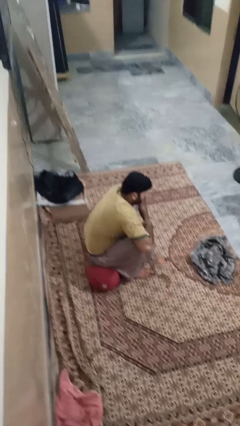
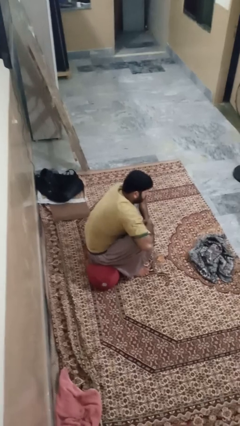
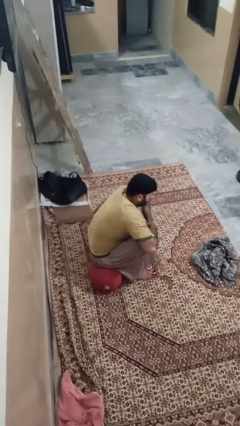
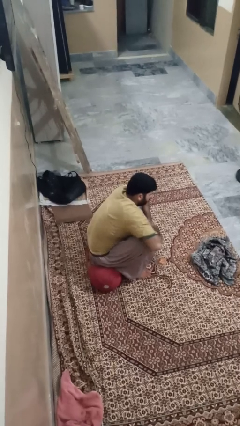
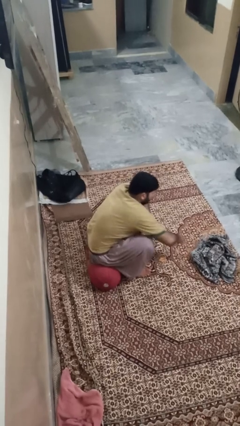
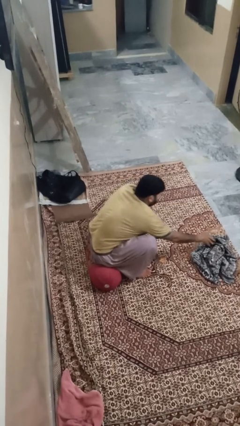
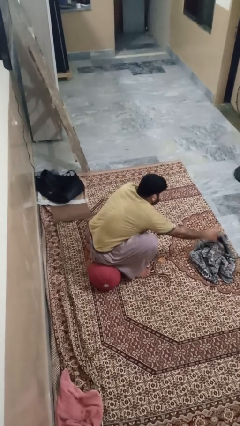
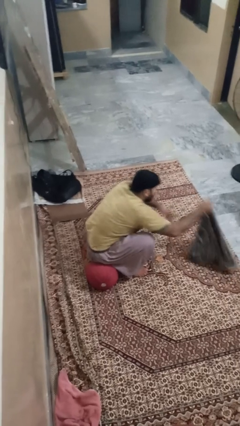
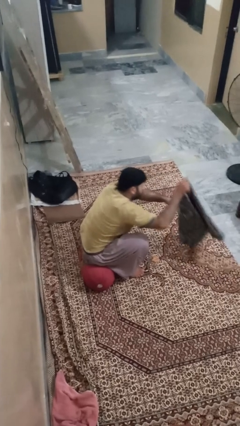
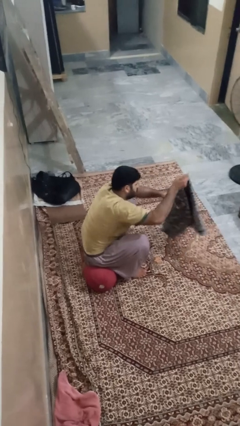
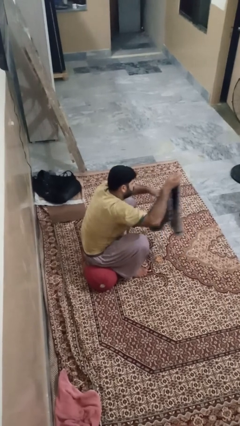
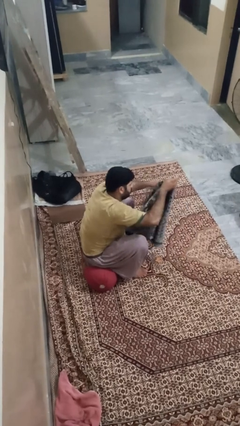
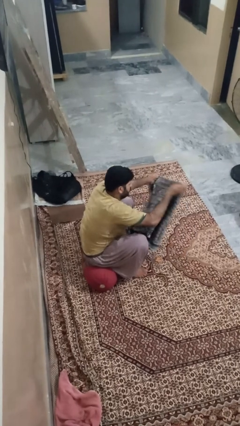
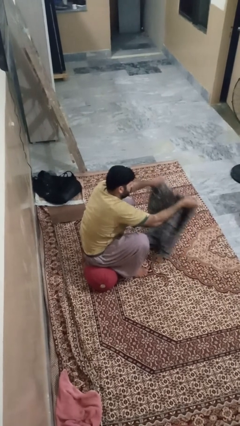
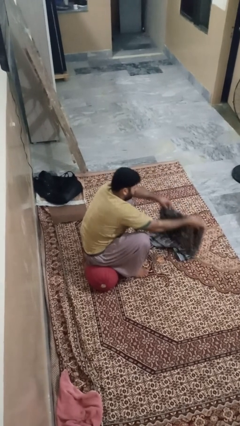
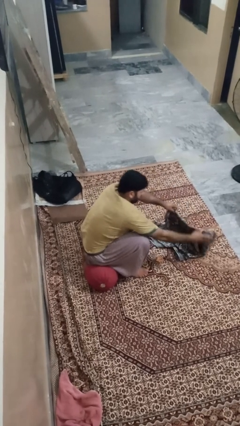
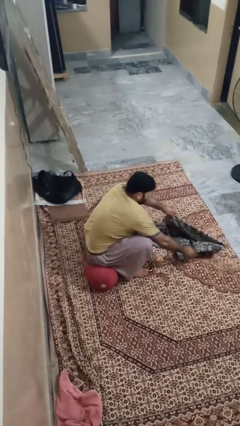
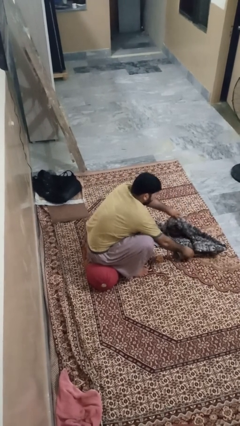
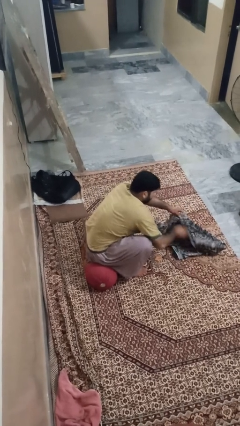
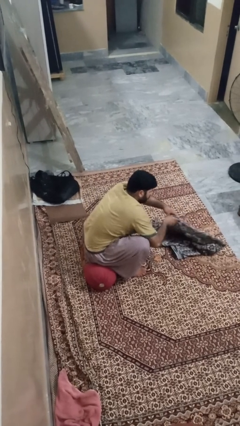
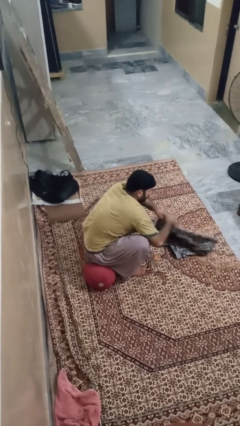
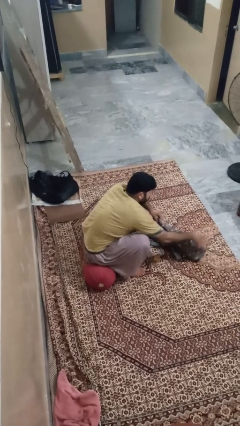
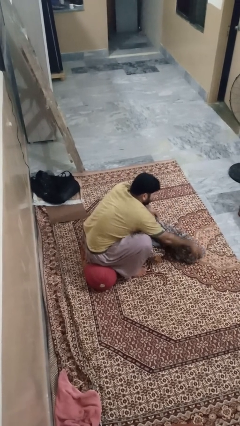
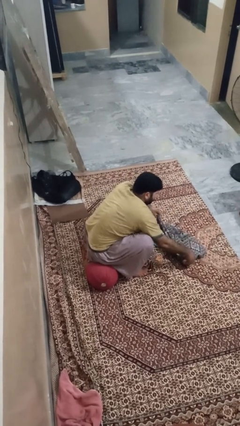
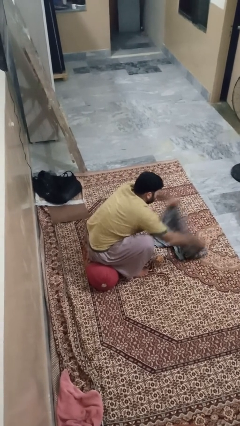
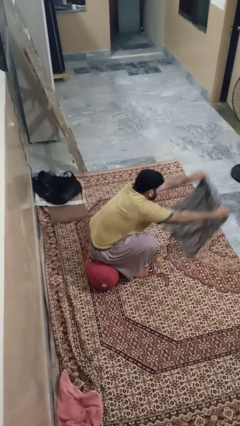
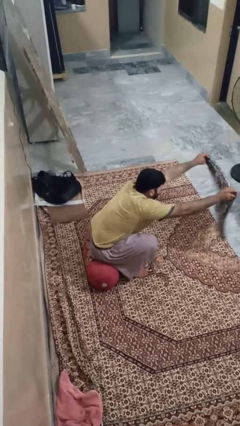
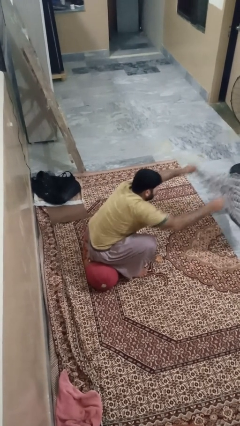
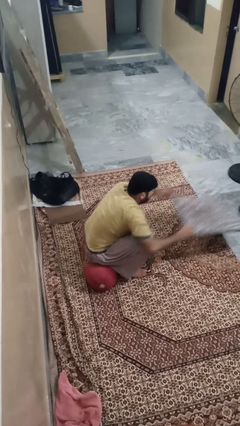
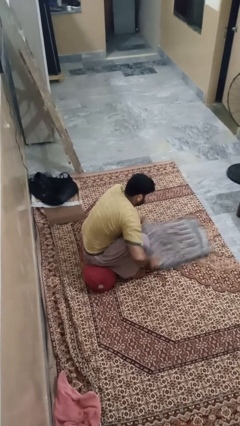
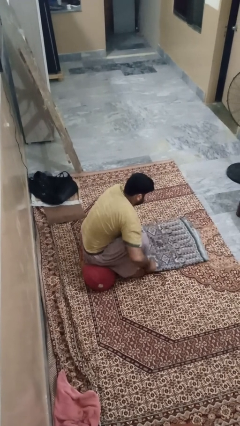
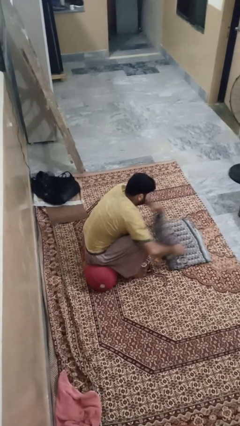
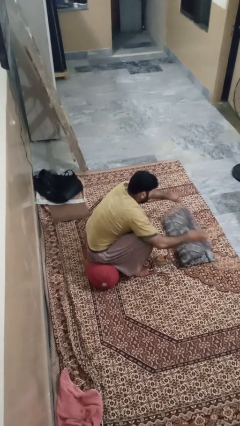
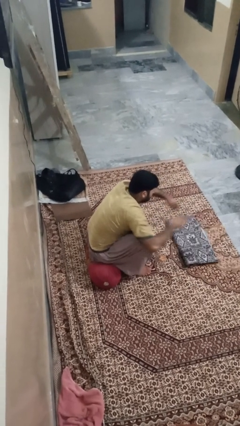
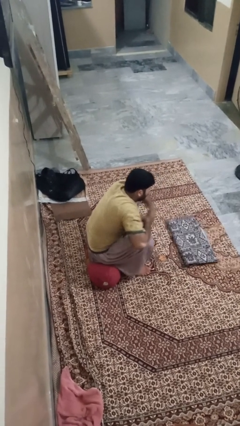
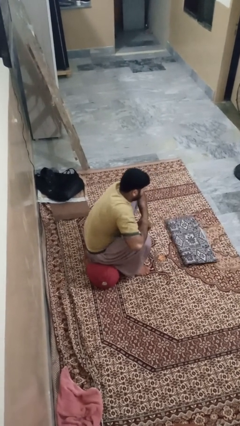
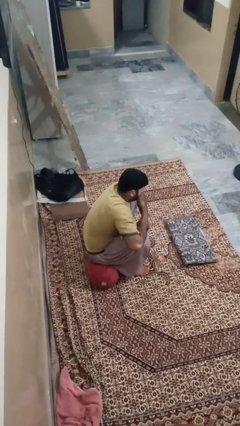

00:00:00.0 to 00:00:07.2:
person folds blanket

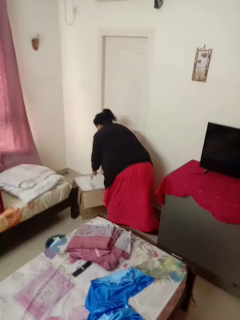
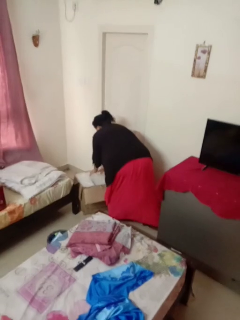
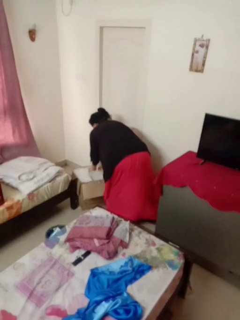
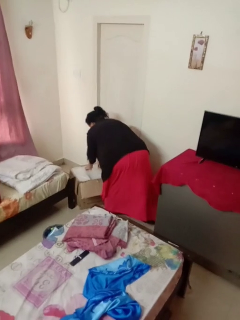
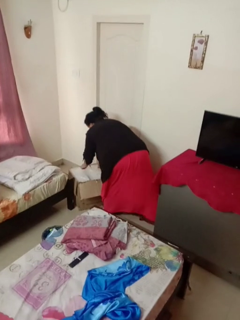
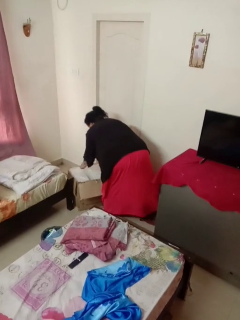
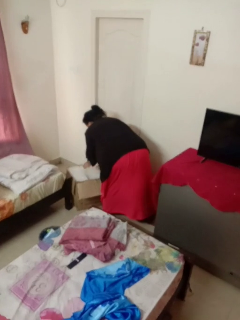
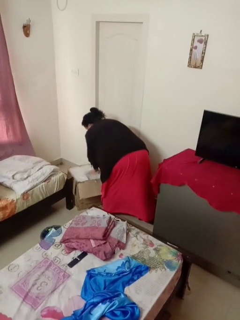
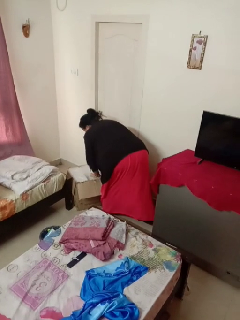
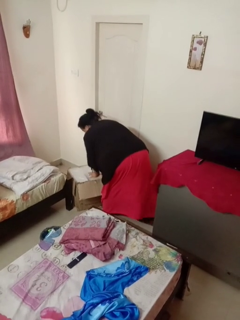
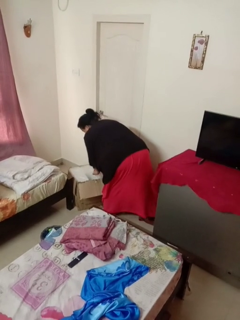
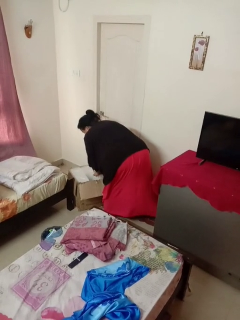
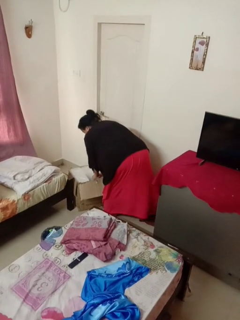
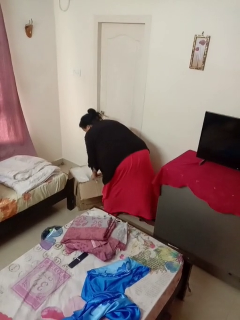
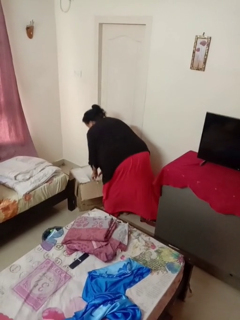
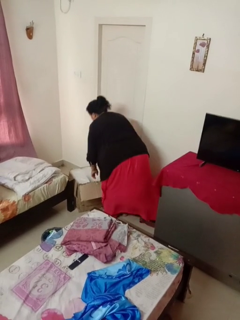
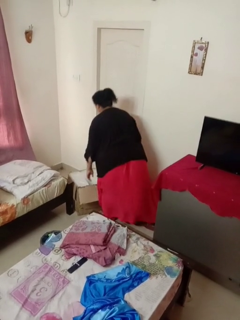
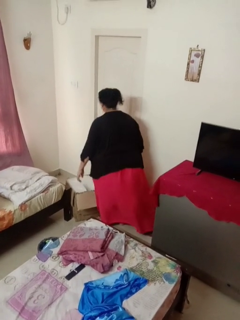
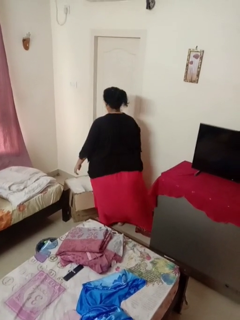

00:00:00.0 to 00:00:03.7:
person searches in box

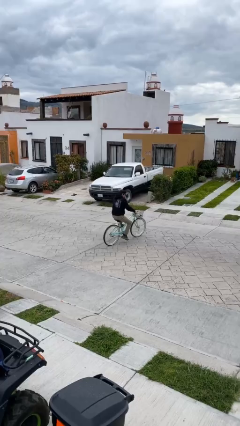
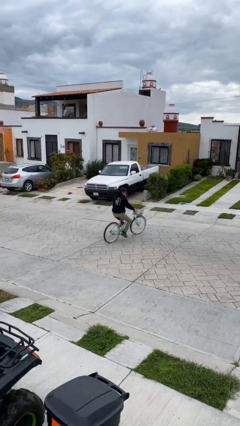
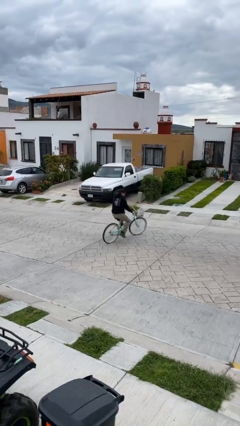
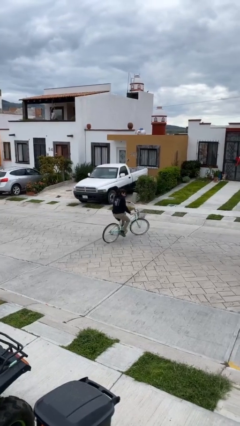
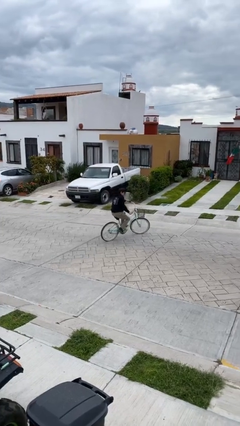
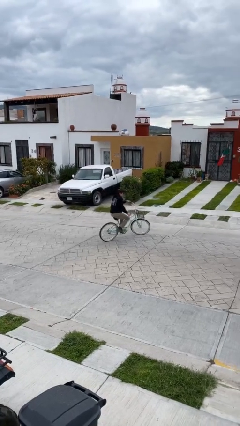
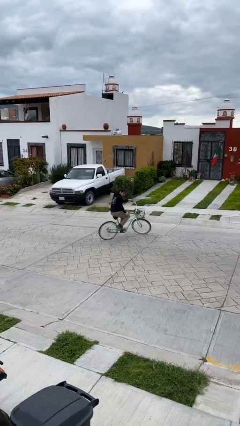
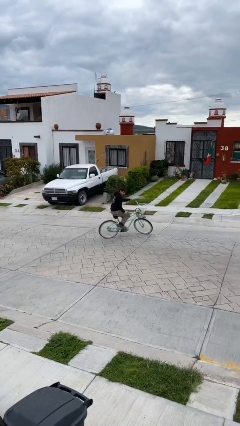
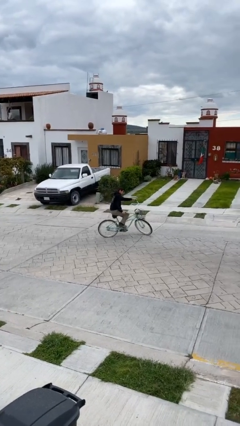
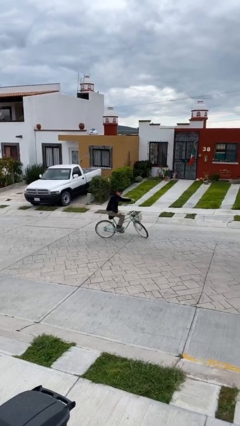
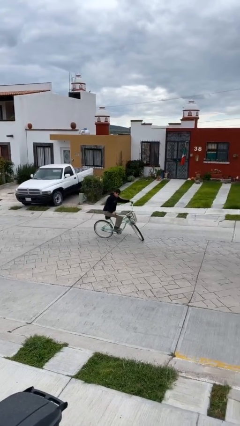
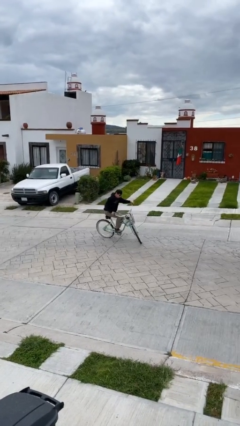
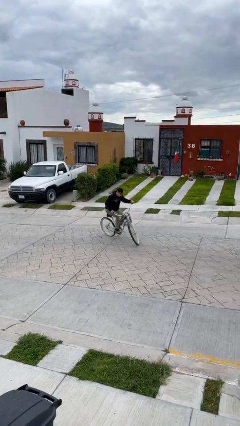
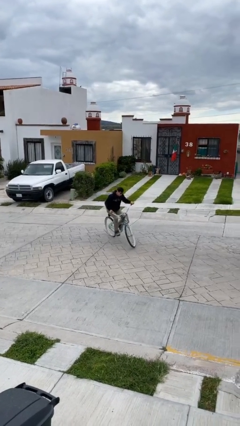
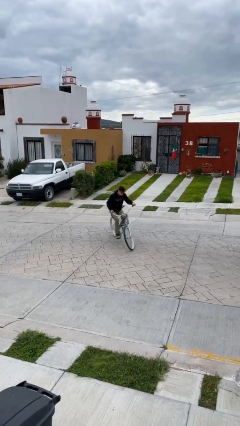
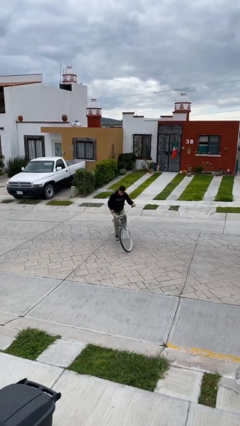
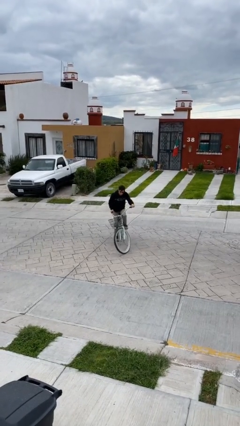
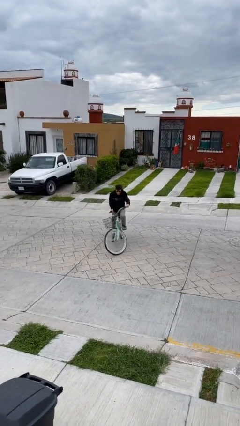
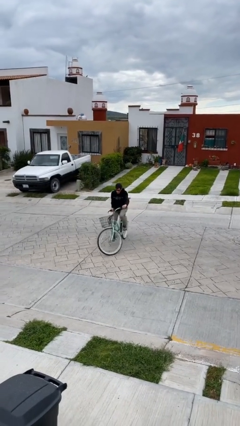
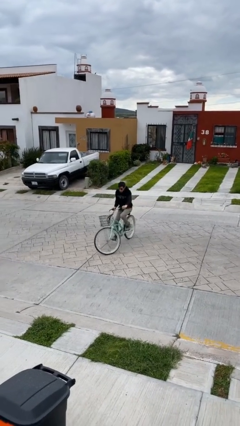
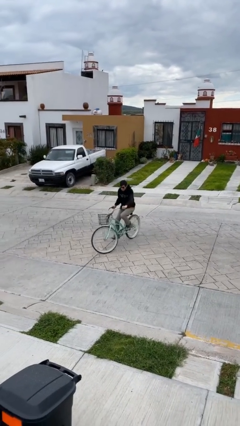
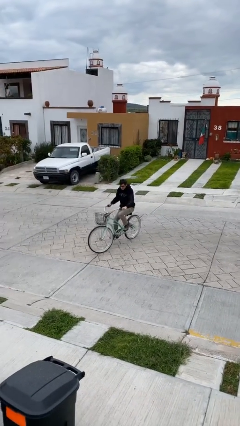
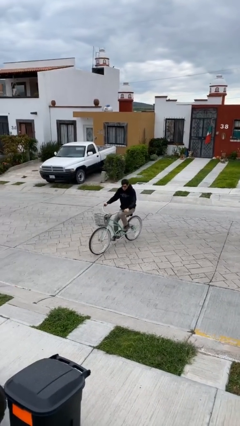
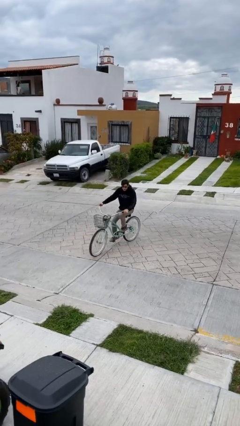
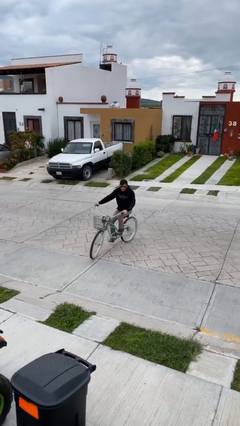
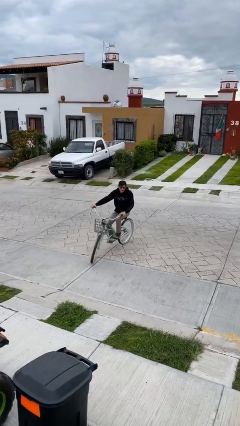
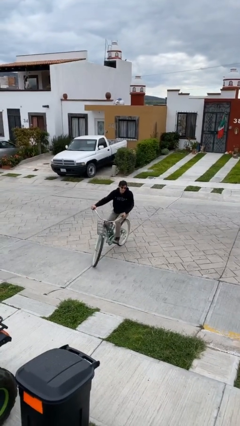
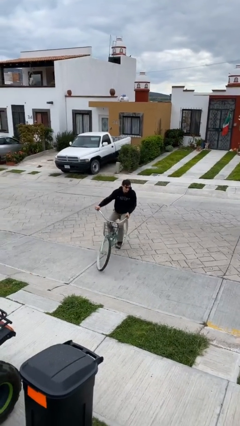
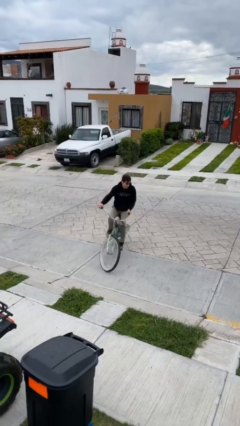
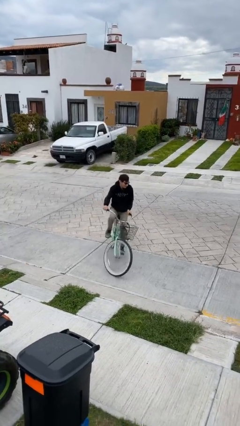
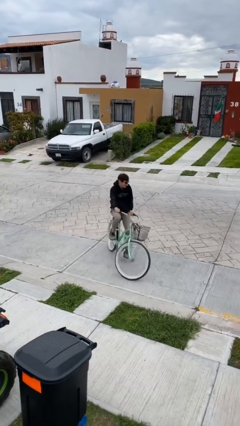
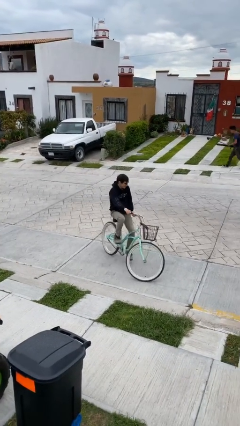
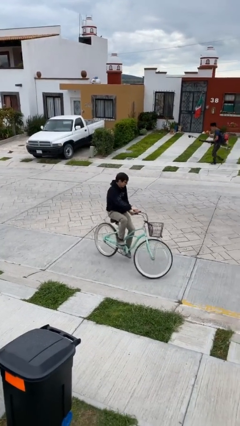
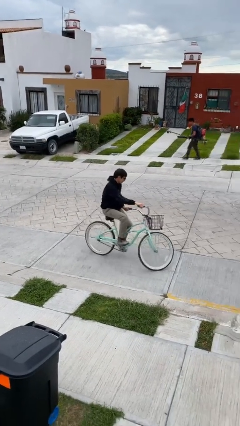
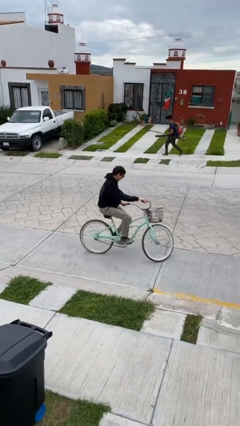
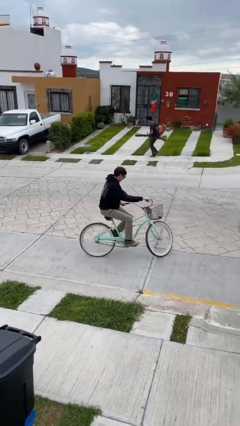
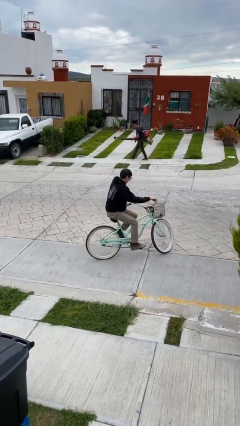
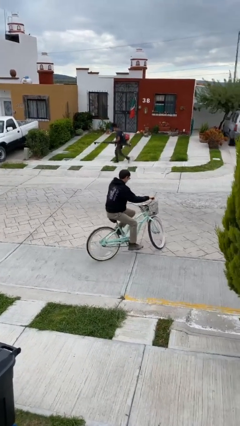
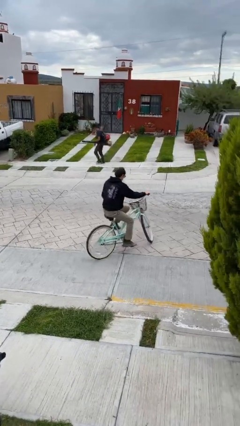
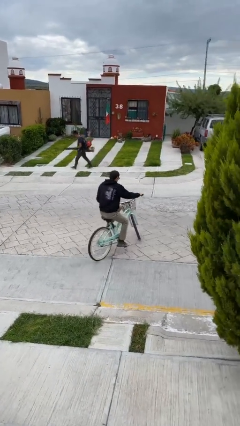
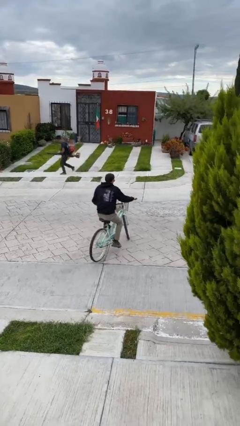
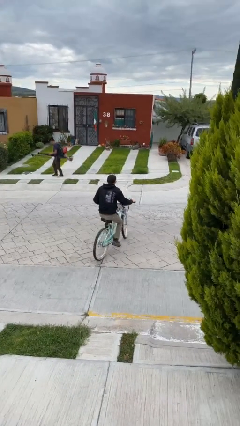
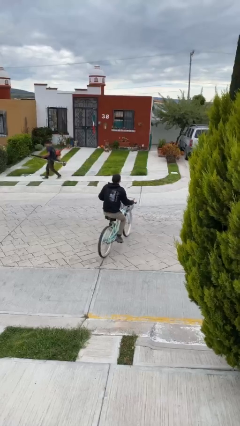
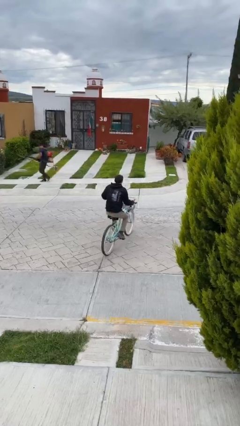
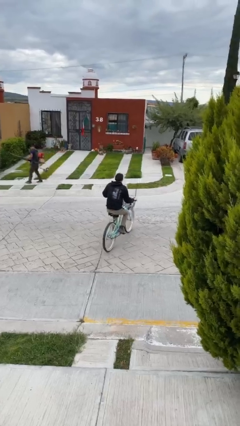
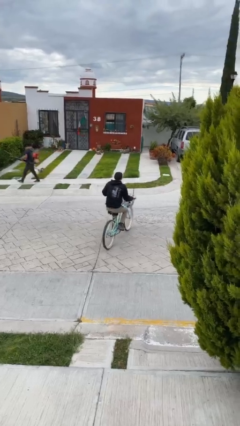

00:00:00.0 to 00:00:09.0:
person rides bicycle
